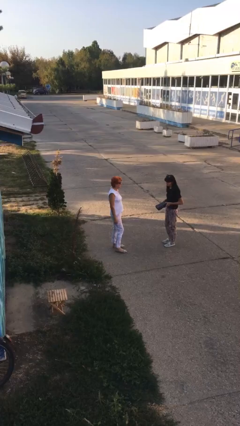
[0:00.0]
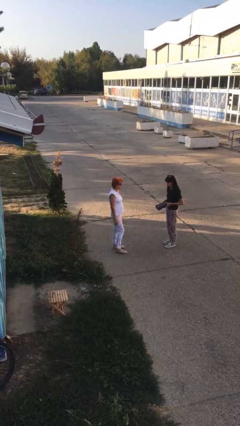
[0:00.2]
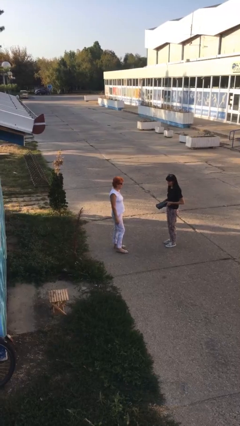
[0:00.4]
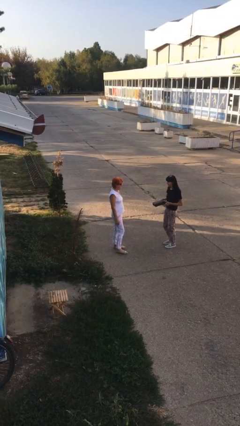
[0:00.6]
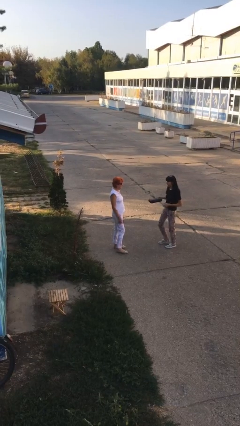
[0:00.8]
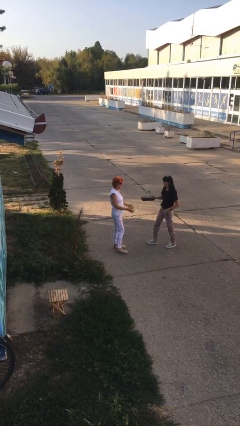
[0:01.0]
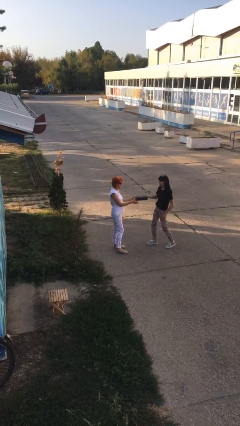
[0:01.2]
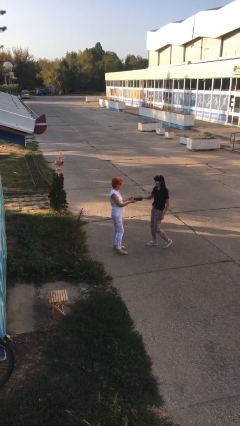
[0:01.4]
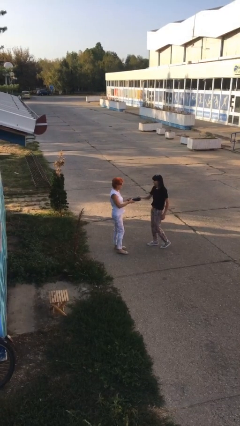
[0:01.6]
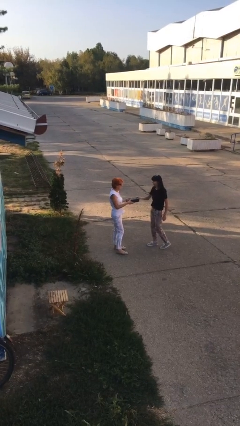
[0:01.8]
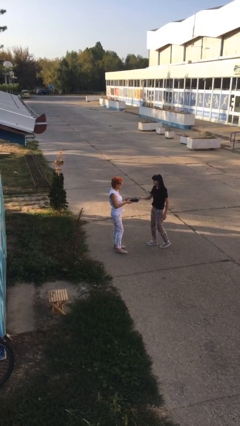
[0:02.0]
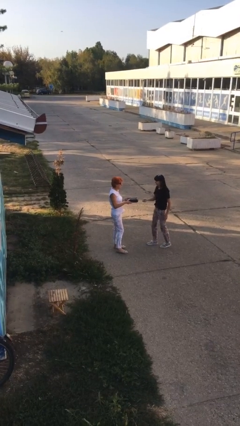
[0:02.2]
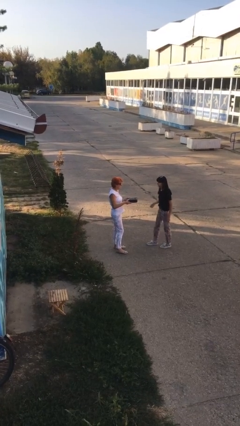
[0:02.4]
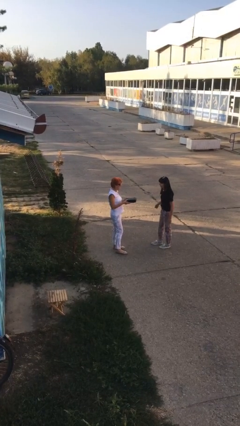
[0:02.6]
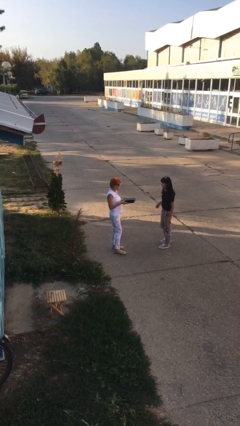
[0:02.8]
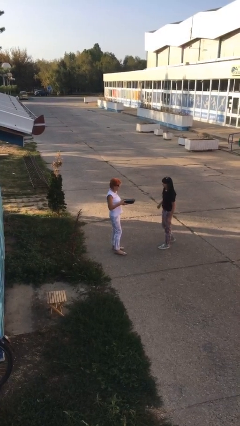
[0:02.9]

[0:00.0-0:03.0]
person transfers object to person

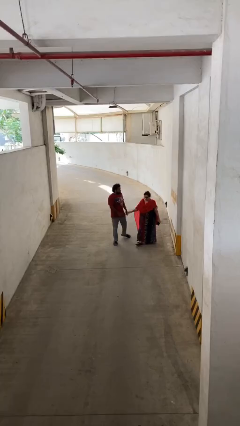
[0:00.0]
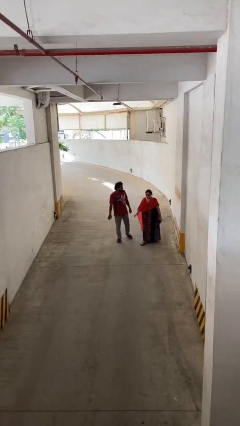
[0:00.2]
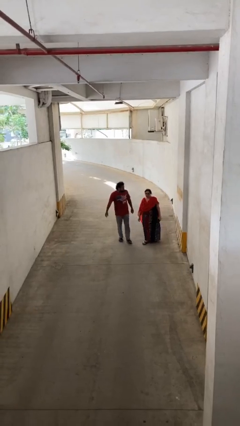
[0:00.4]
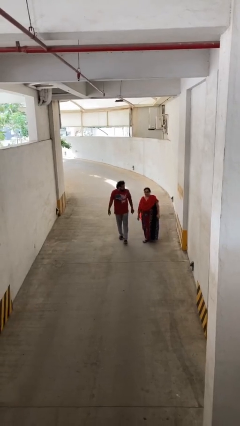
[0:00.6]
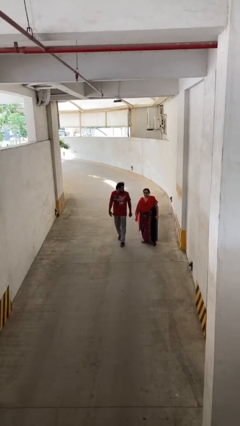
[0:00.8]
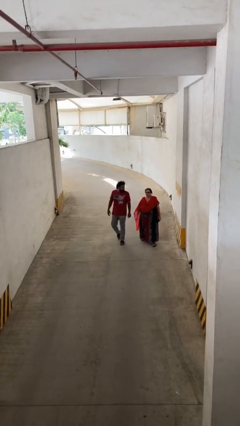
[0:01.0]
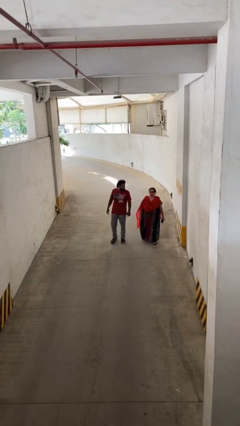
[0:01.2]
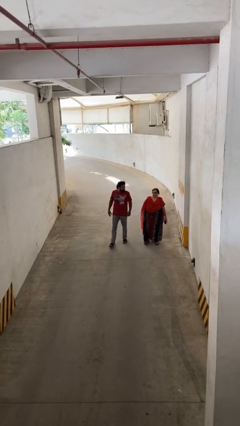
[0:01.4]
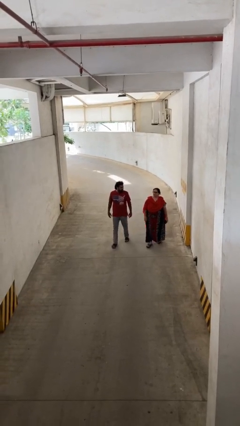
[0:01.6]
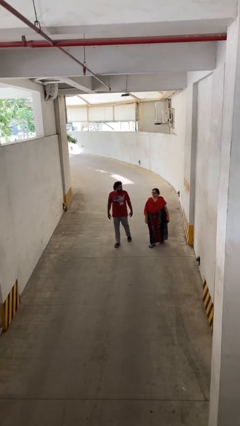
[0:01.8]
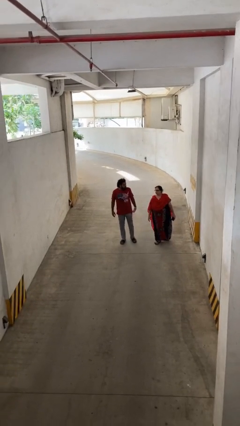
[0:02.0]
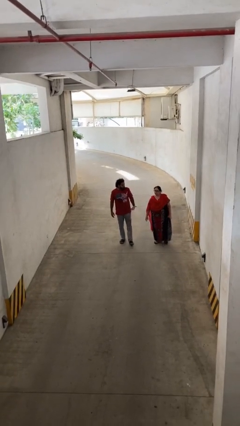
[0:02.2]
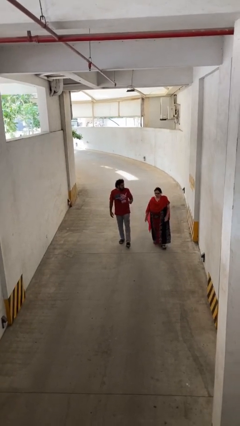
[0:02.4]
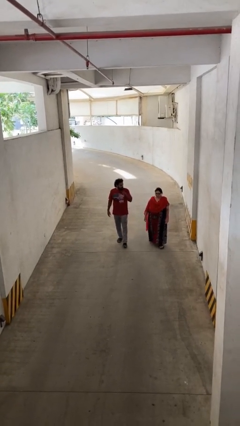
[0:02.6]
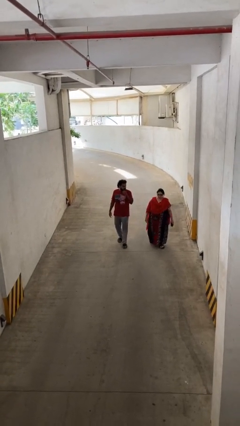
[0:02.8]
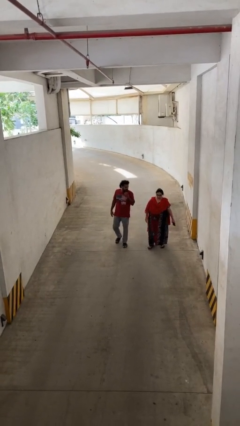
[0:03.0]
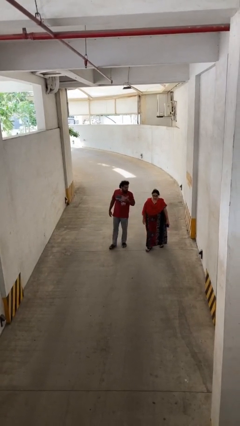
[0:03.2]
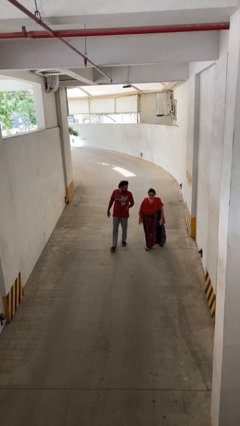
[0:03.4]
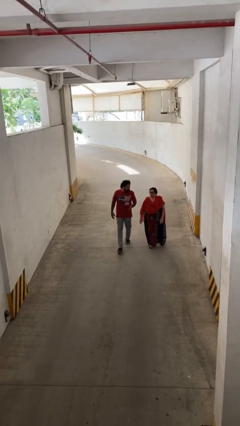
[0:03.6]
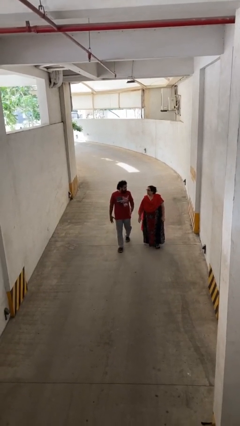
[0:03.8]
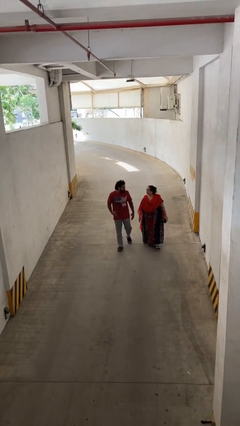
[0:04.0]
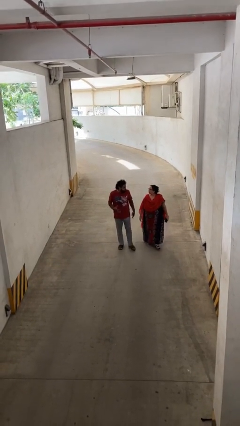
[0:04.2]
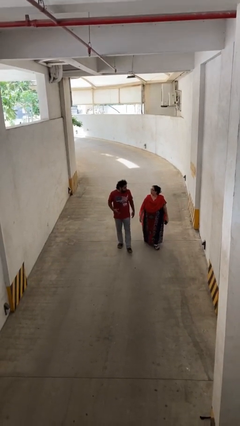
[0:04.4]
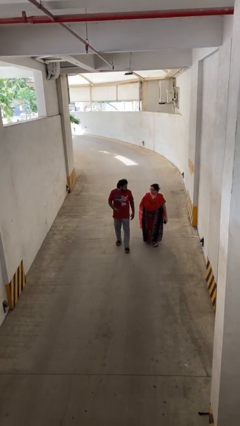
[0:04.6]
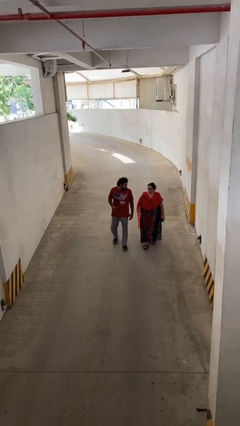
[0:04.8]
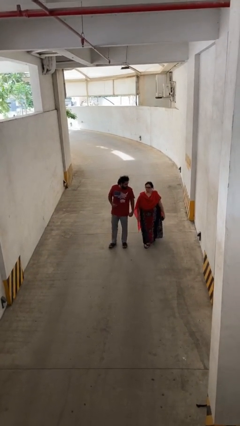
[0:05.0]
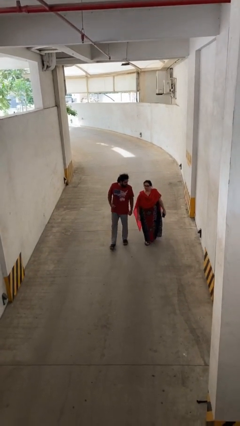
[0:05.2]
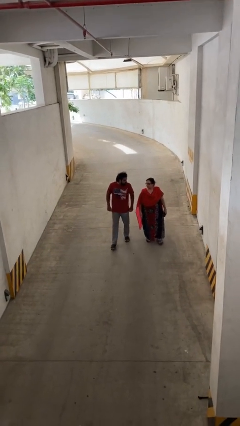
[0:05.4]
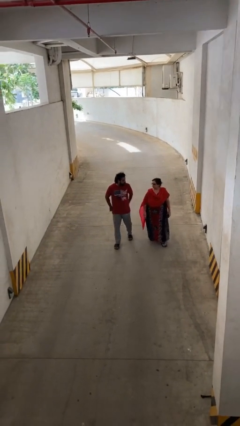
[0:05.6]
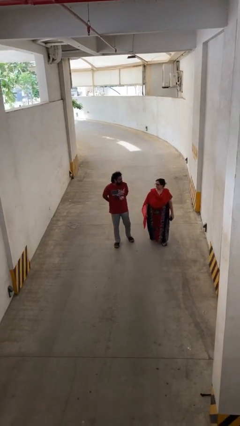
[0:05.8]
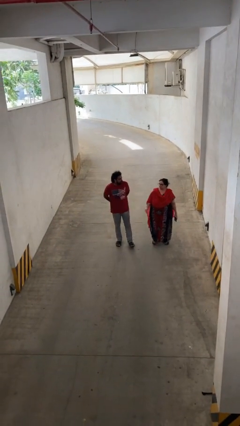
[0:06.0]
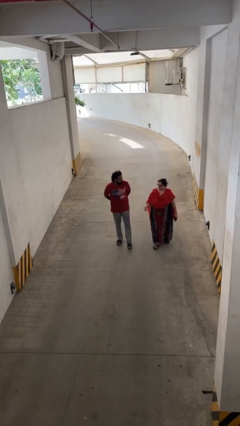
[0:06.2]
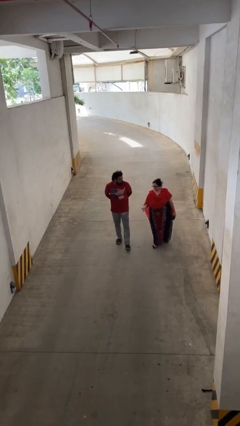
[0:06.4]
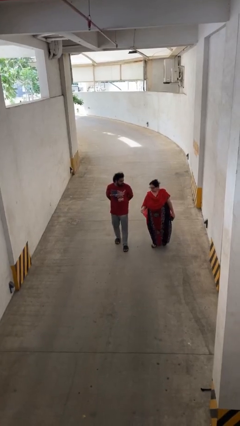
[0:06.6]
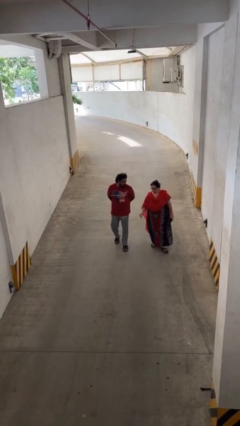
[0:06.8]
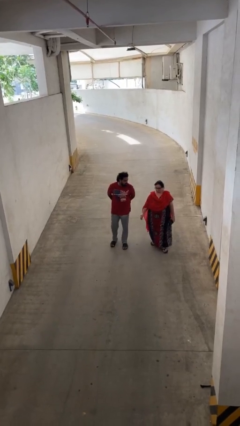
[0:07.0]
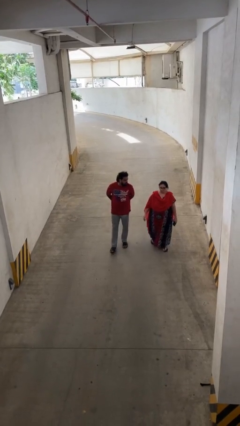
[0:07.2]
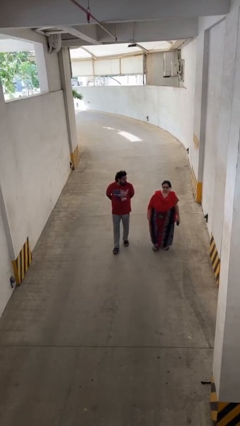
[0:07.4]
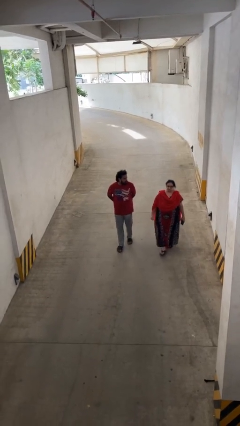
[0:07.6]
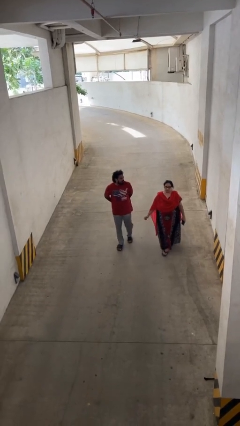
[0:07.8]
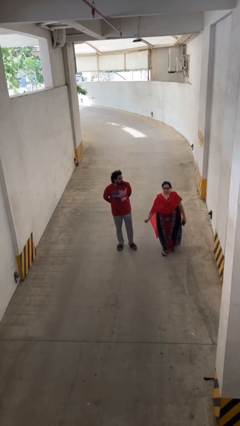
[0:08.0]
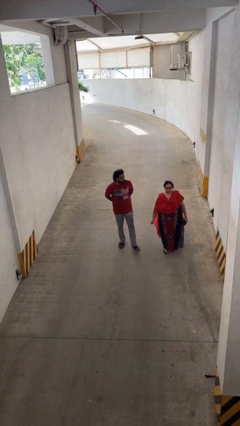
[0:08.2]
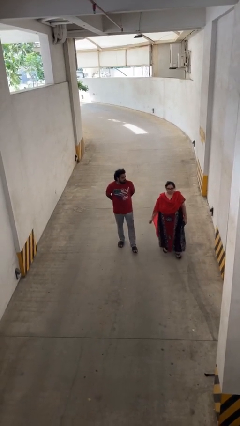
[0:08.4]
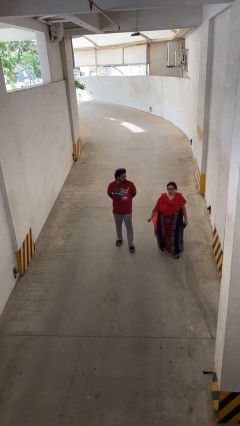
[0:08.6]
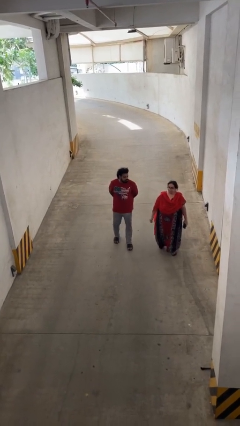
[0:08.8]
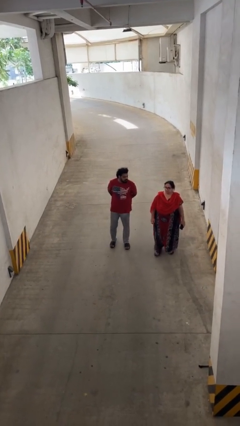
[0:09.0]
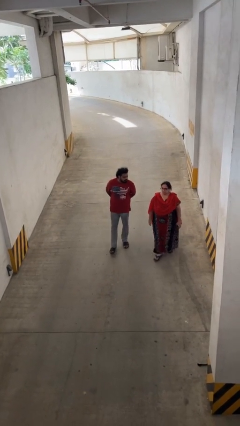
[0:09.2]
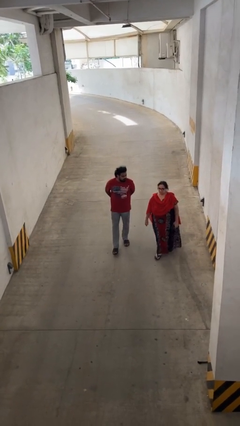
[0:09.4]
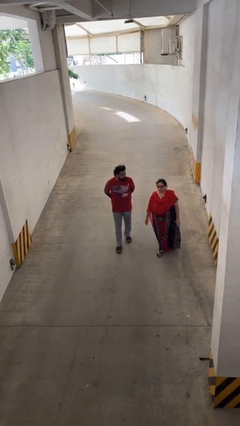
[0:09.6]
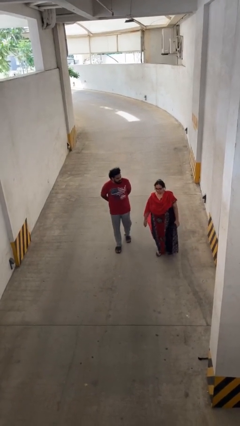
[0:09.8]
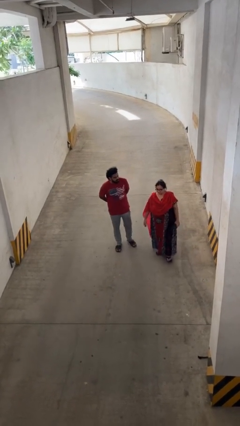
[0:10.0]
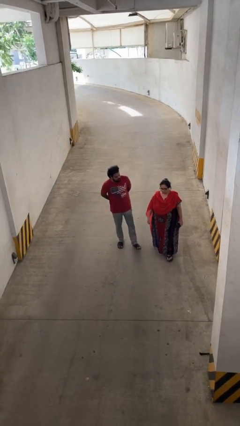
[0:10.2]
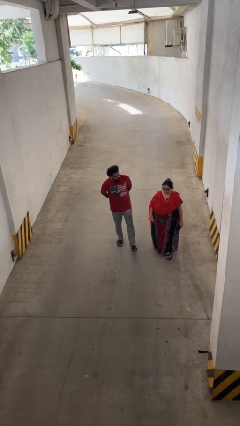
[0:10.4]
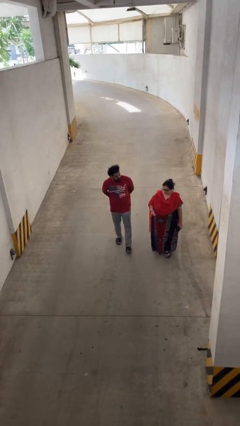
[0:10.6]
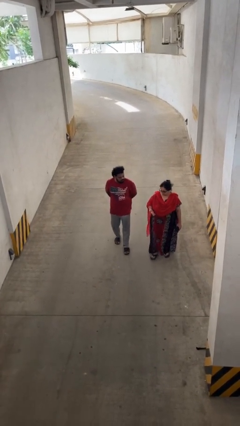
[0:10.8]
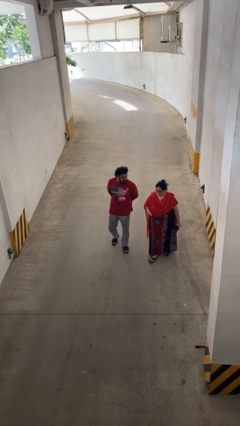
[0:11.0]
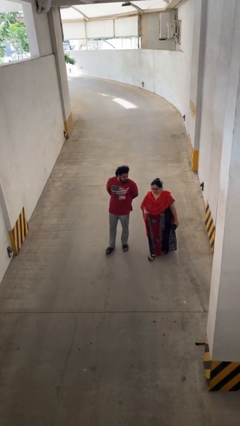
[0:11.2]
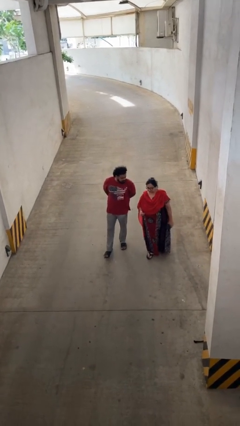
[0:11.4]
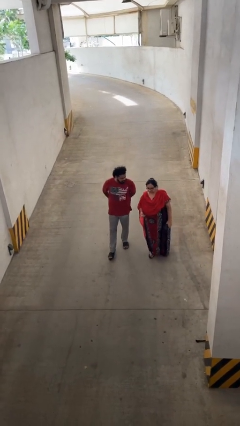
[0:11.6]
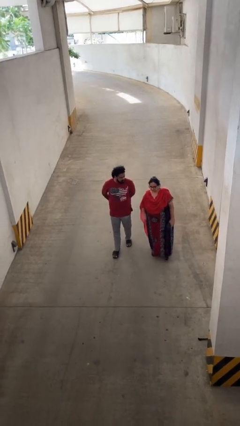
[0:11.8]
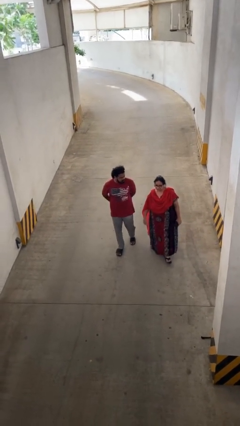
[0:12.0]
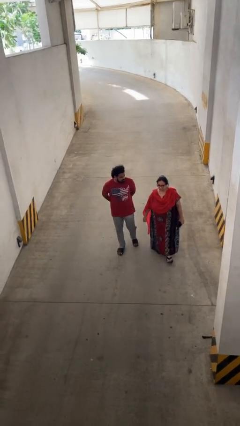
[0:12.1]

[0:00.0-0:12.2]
person talks to person

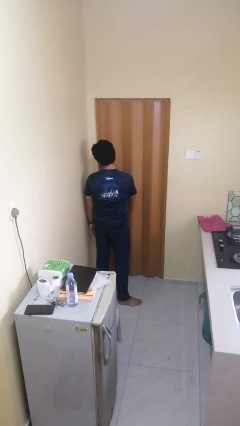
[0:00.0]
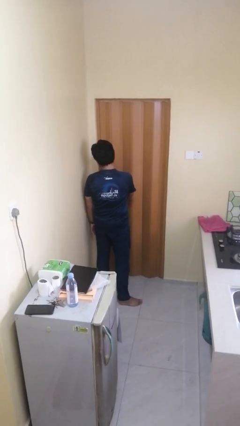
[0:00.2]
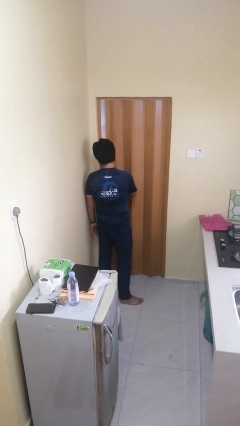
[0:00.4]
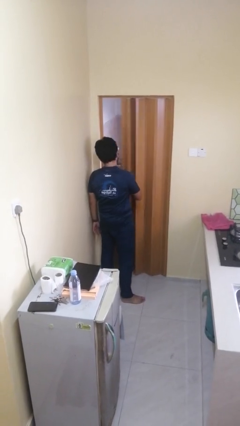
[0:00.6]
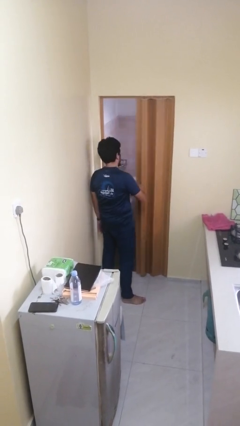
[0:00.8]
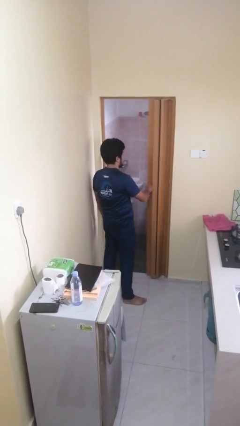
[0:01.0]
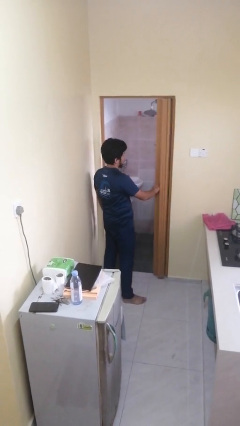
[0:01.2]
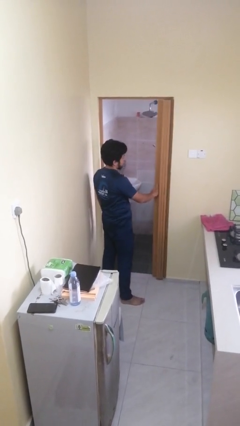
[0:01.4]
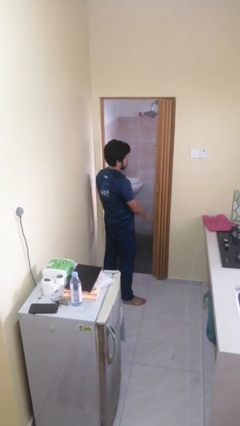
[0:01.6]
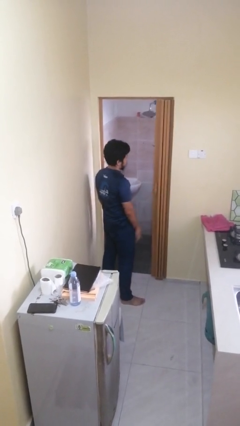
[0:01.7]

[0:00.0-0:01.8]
person opens sliding door

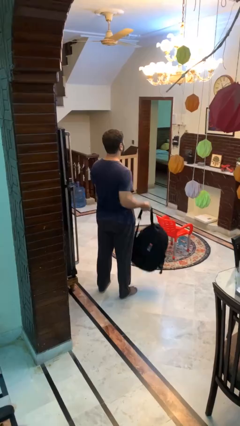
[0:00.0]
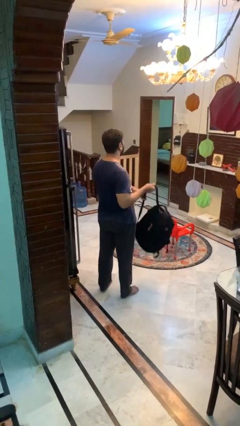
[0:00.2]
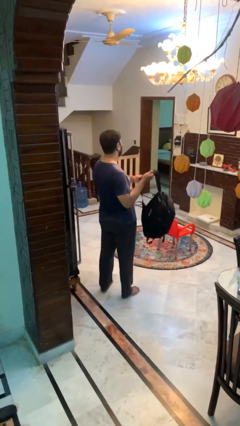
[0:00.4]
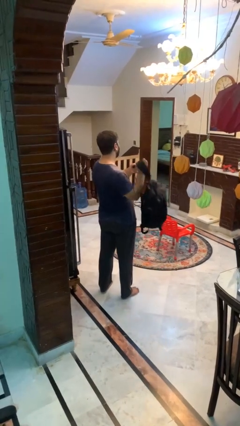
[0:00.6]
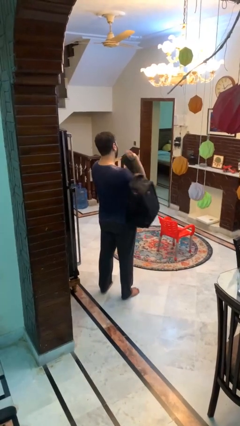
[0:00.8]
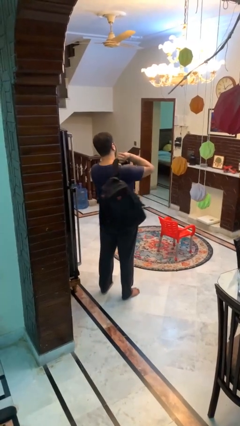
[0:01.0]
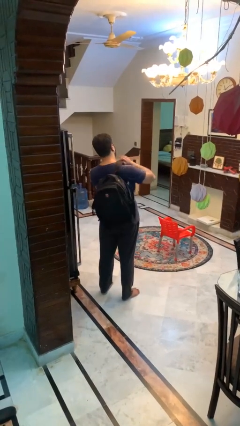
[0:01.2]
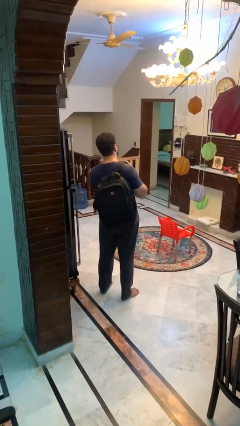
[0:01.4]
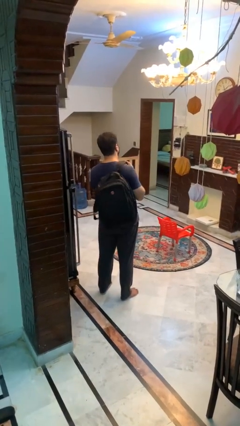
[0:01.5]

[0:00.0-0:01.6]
person puts on backpack
